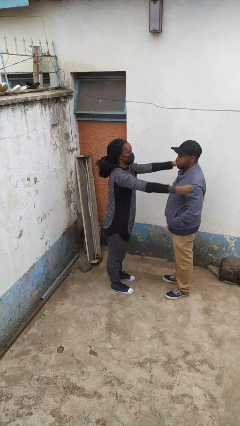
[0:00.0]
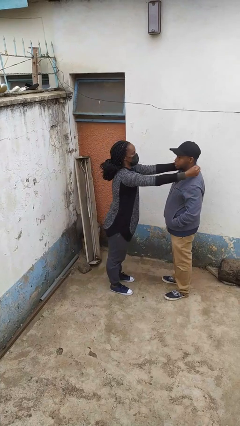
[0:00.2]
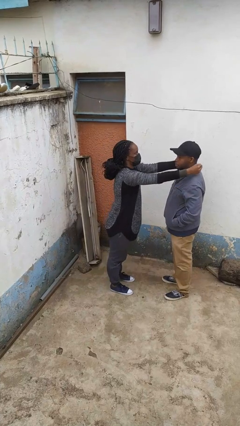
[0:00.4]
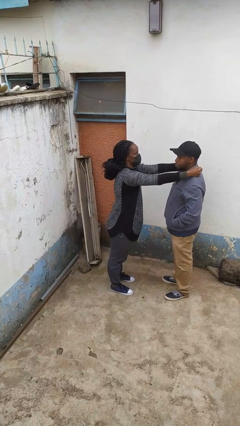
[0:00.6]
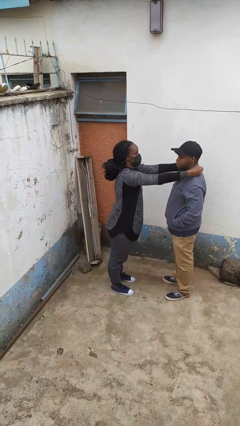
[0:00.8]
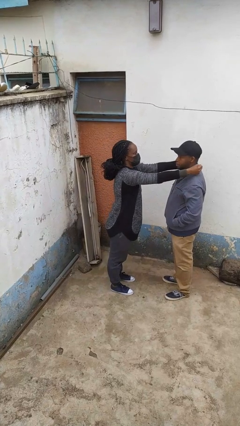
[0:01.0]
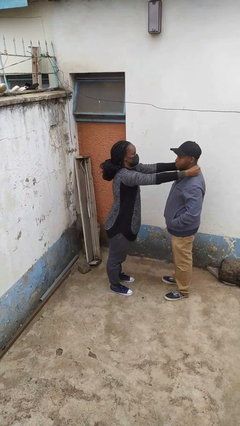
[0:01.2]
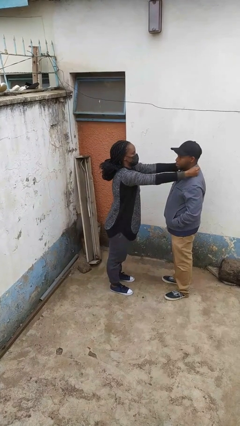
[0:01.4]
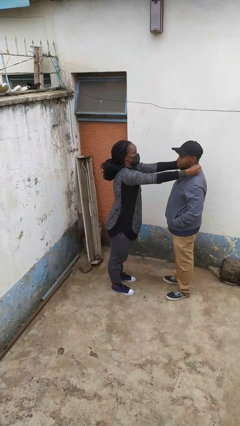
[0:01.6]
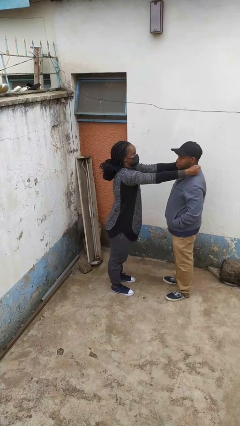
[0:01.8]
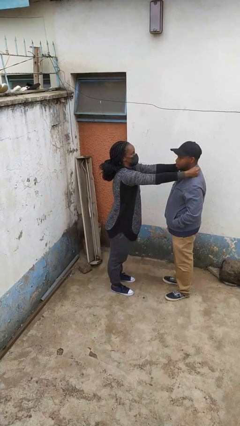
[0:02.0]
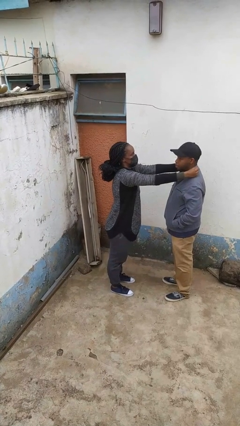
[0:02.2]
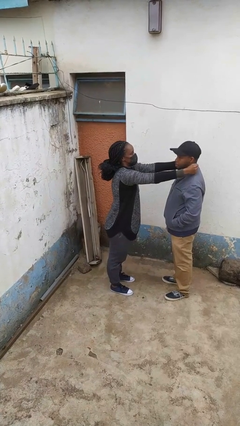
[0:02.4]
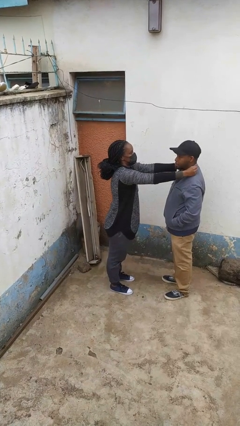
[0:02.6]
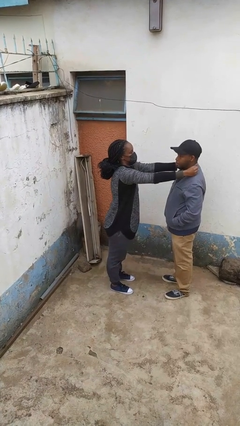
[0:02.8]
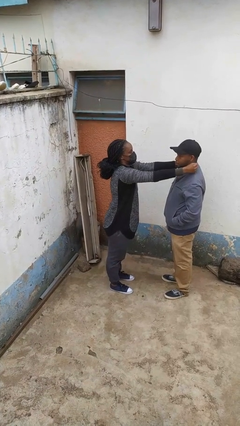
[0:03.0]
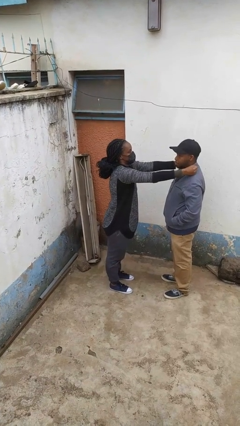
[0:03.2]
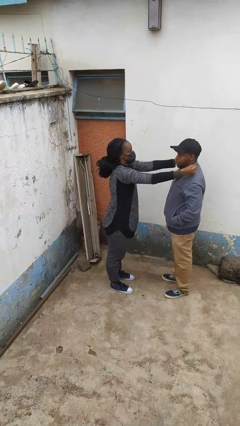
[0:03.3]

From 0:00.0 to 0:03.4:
person pounds shoulders of person

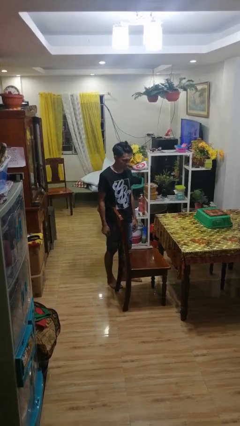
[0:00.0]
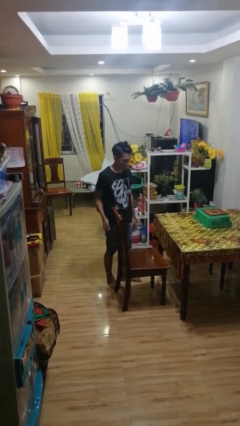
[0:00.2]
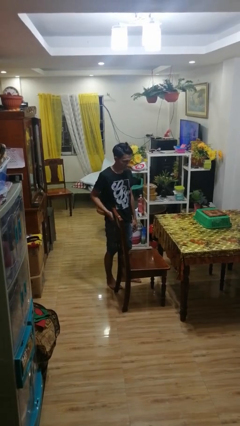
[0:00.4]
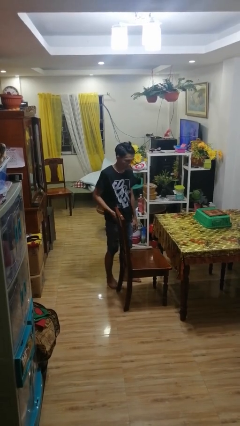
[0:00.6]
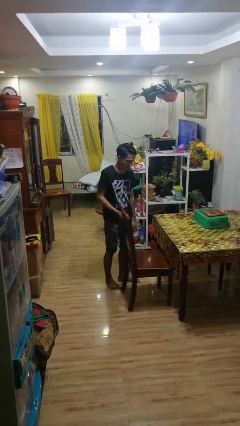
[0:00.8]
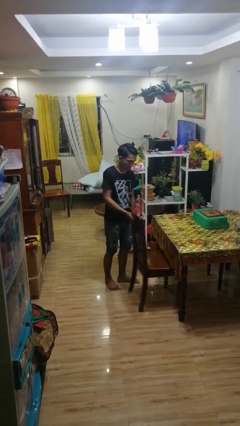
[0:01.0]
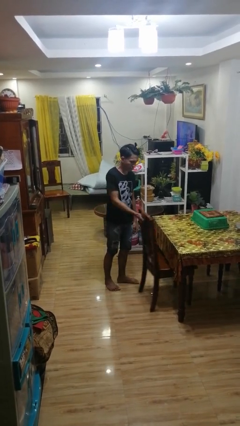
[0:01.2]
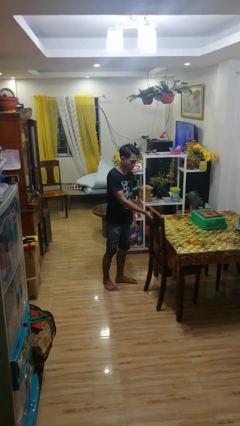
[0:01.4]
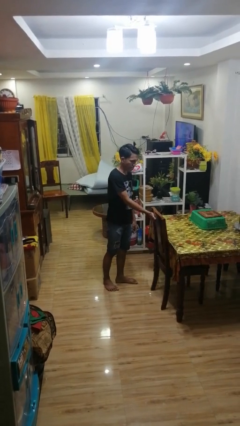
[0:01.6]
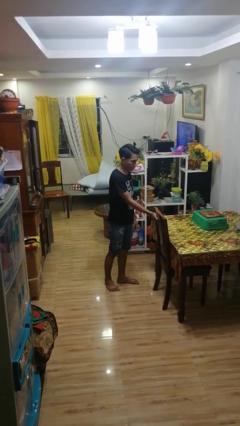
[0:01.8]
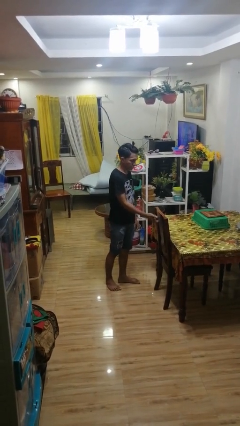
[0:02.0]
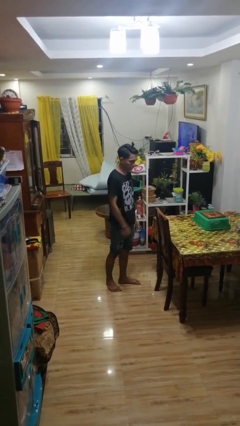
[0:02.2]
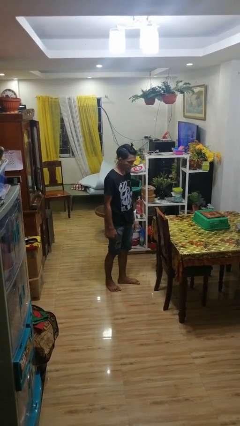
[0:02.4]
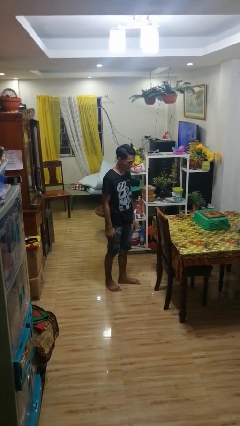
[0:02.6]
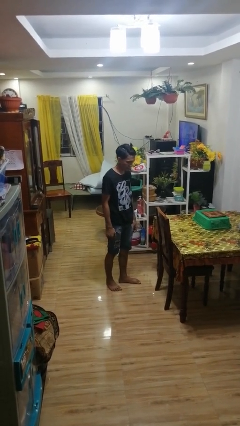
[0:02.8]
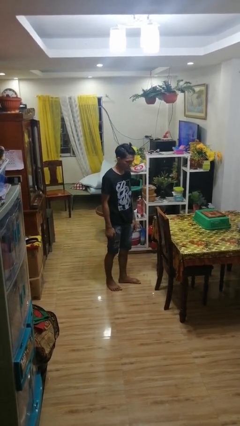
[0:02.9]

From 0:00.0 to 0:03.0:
person pushes in chair

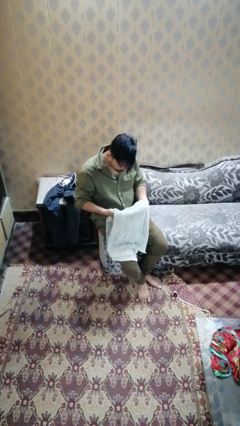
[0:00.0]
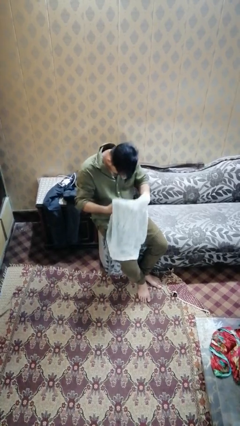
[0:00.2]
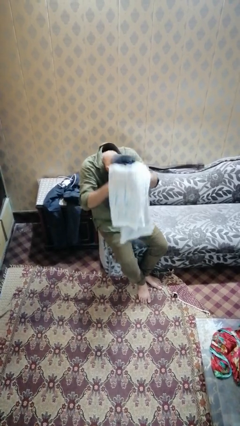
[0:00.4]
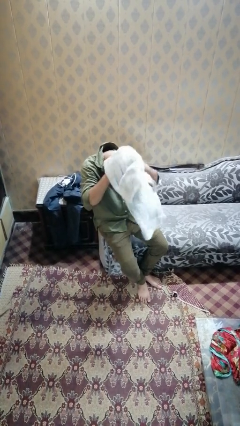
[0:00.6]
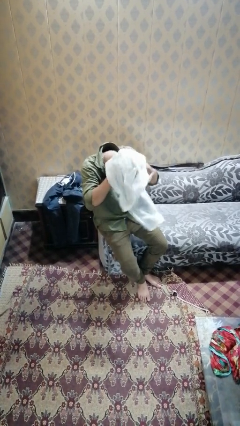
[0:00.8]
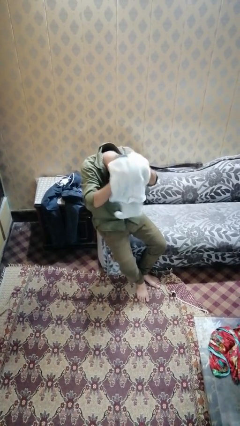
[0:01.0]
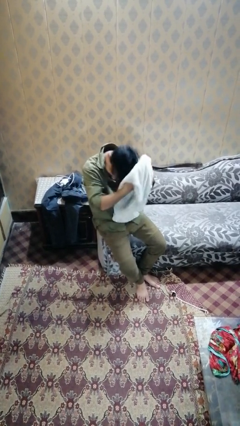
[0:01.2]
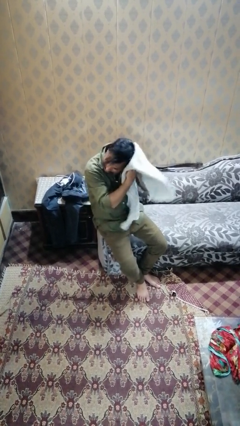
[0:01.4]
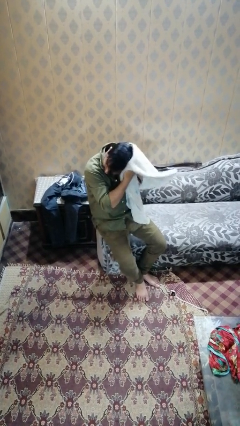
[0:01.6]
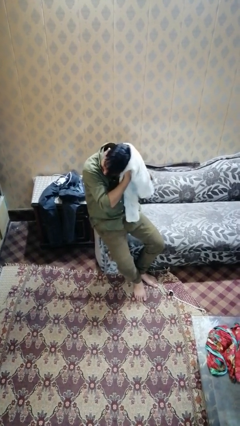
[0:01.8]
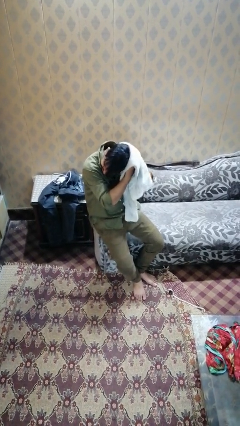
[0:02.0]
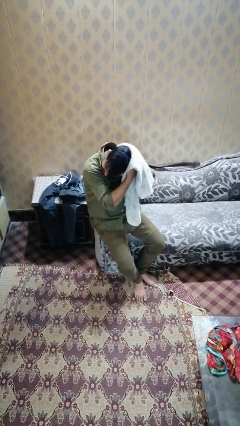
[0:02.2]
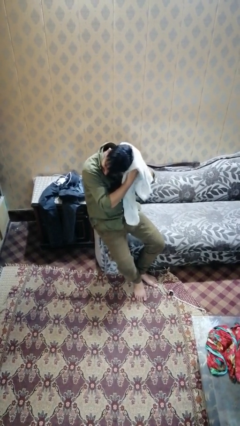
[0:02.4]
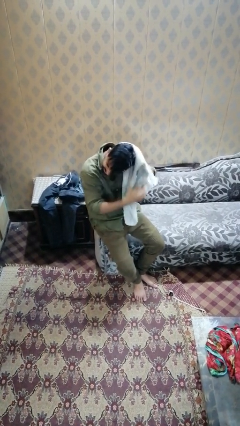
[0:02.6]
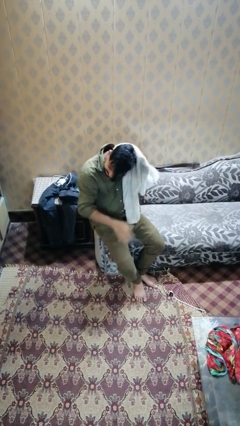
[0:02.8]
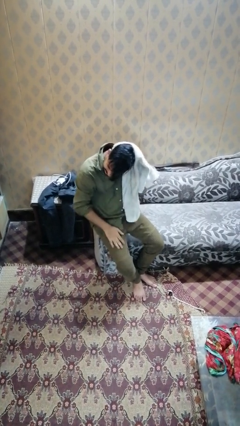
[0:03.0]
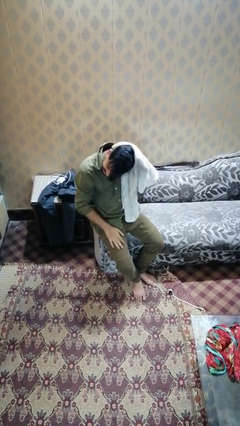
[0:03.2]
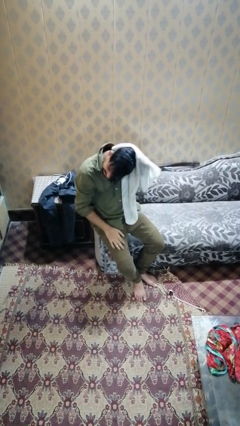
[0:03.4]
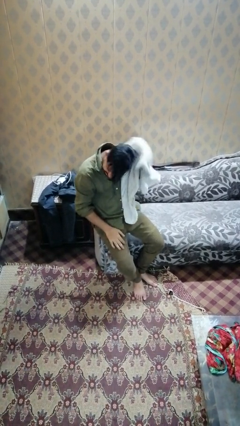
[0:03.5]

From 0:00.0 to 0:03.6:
person dries hair with towel

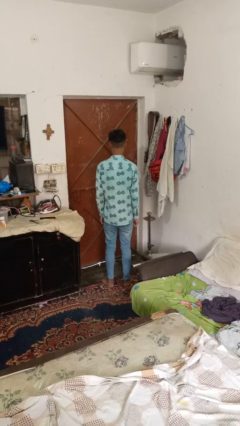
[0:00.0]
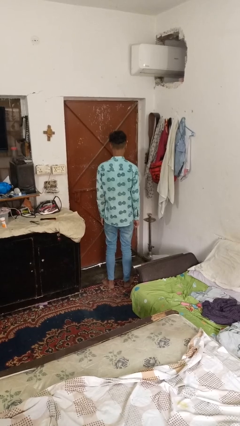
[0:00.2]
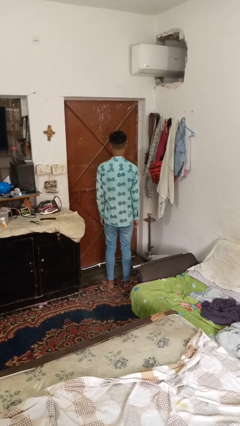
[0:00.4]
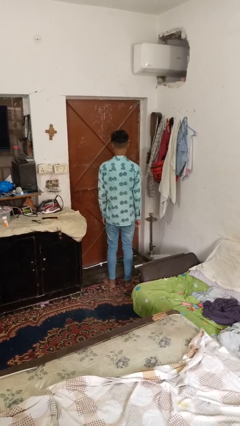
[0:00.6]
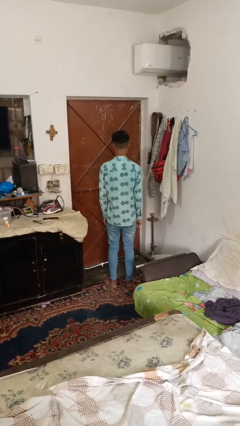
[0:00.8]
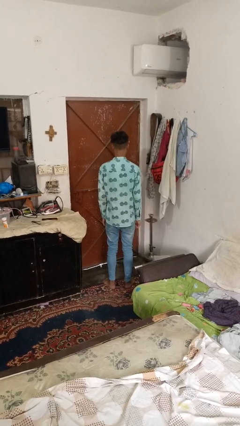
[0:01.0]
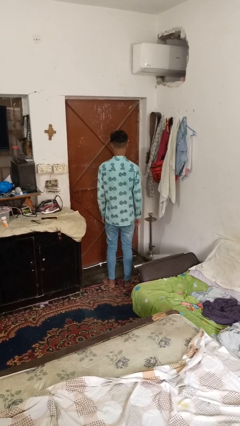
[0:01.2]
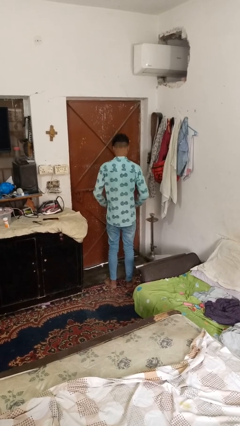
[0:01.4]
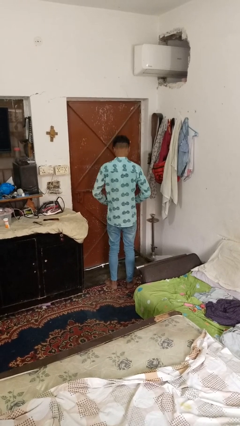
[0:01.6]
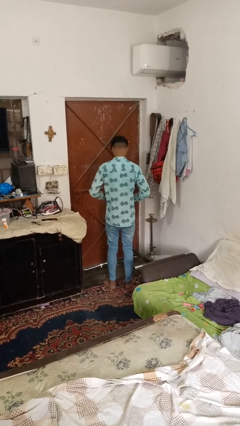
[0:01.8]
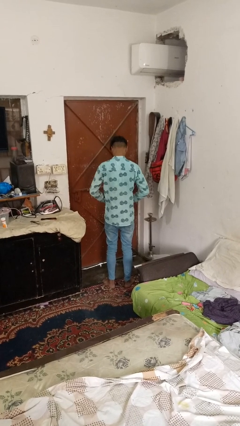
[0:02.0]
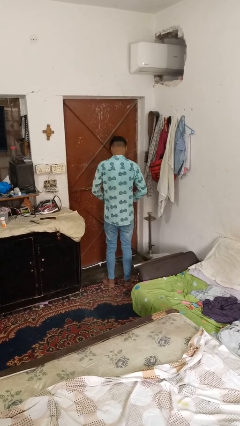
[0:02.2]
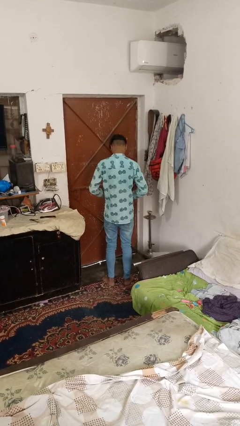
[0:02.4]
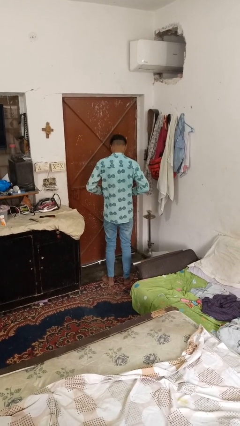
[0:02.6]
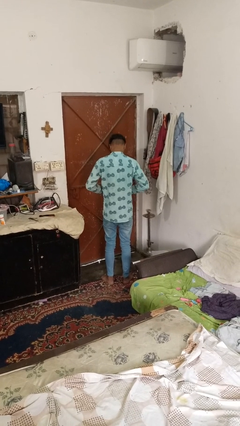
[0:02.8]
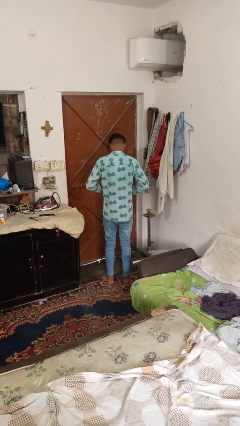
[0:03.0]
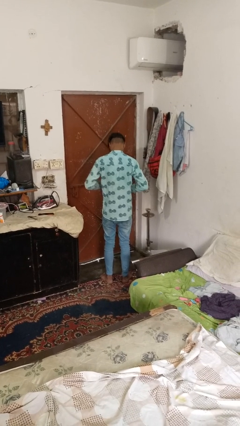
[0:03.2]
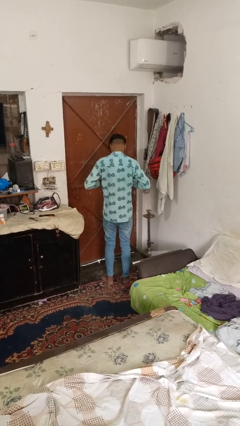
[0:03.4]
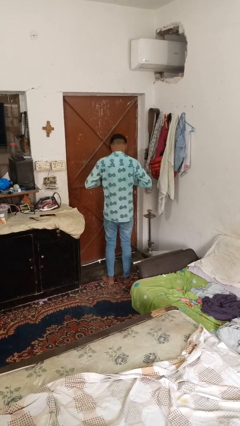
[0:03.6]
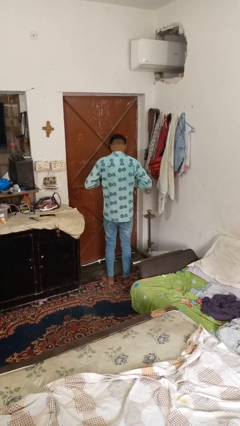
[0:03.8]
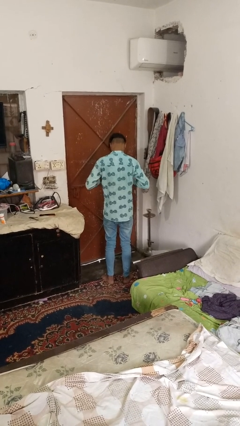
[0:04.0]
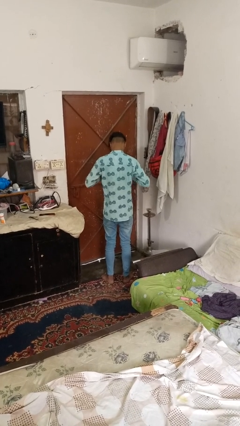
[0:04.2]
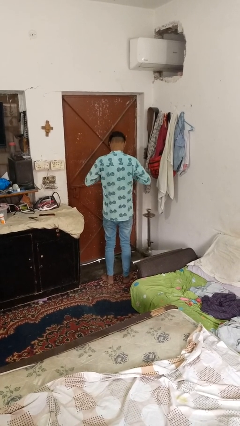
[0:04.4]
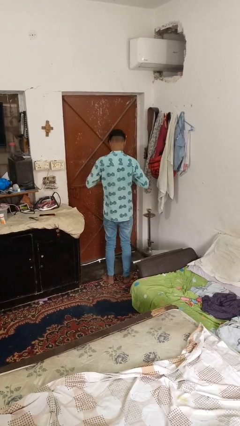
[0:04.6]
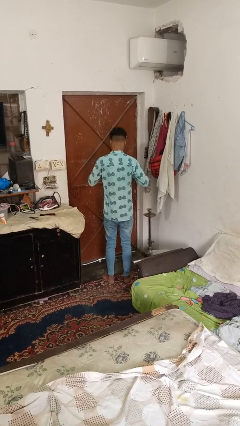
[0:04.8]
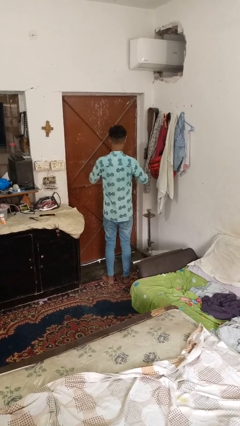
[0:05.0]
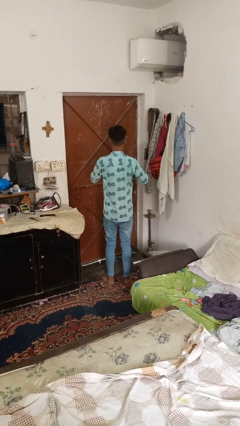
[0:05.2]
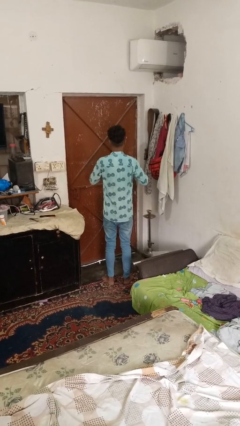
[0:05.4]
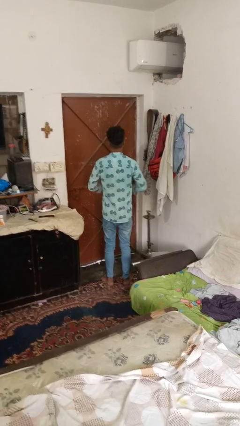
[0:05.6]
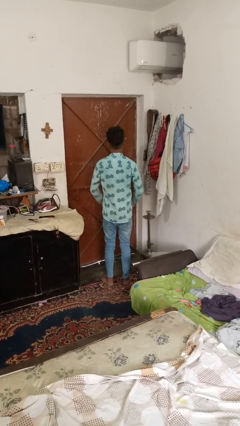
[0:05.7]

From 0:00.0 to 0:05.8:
person buttons shirt

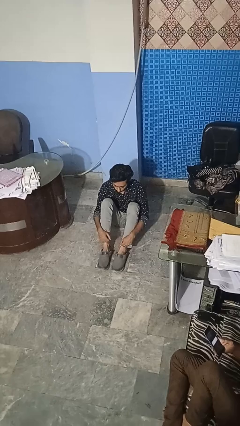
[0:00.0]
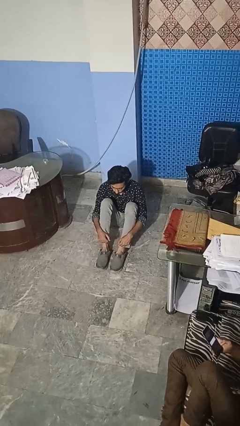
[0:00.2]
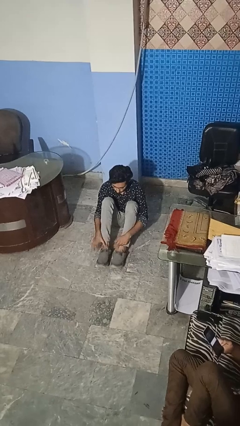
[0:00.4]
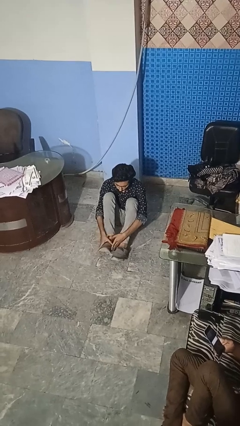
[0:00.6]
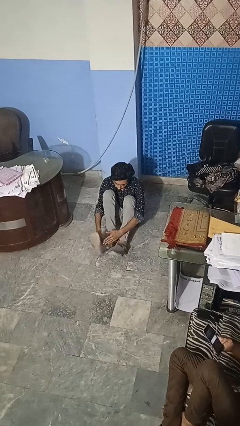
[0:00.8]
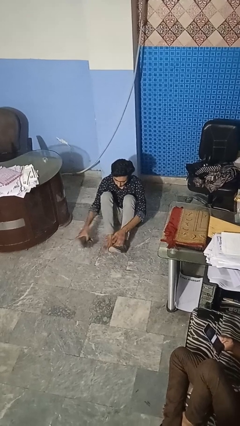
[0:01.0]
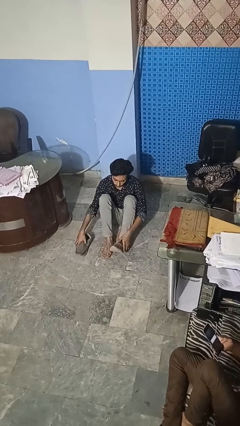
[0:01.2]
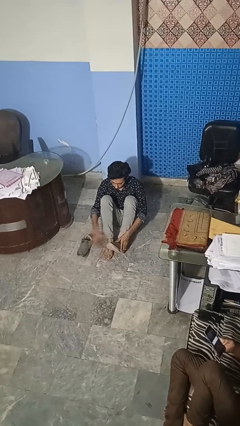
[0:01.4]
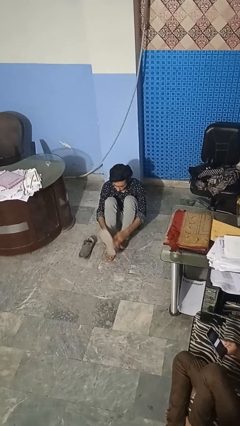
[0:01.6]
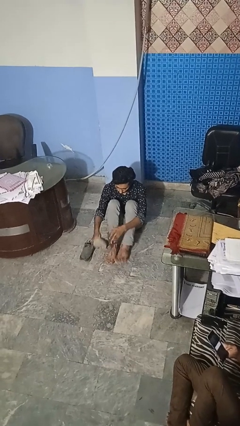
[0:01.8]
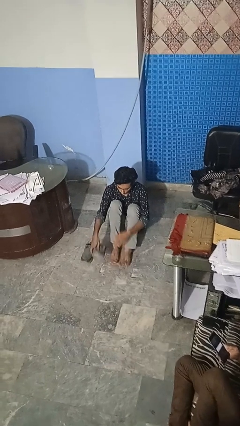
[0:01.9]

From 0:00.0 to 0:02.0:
person takes off shoes
